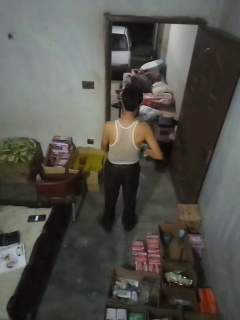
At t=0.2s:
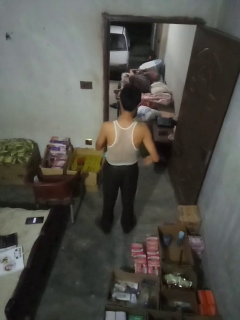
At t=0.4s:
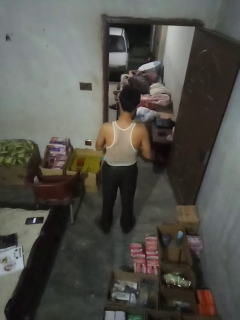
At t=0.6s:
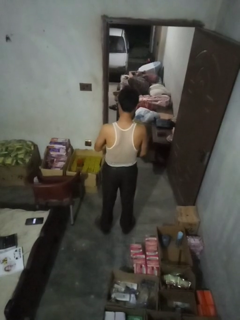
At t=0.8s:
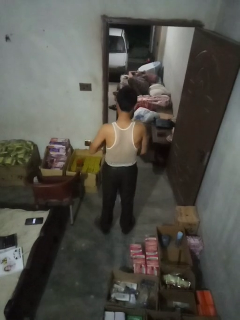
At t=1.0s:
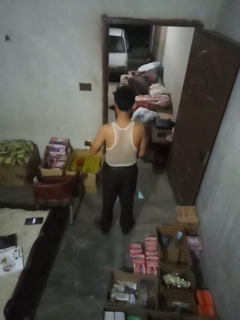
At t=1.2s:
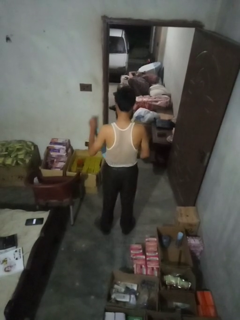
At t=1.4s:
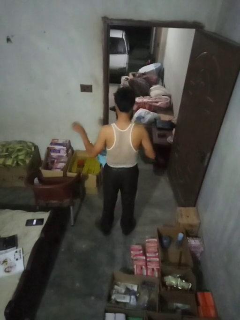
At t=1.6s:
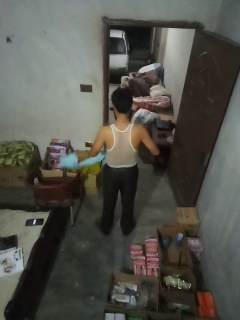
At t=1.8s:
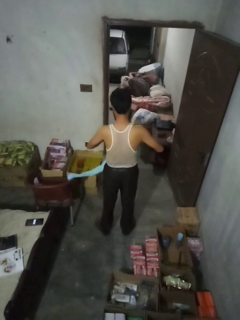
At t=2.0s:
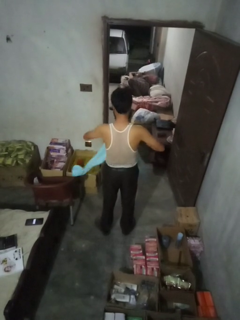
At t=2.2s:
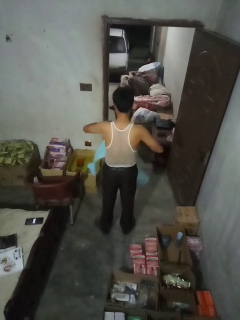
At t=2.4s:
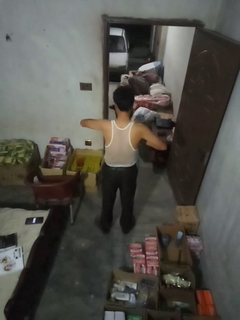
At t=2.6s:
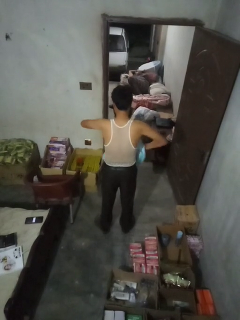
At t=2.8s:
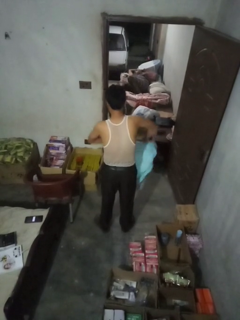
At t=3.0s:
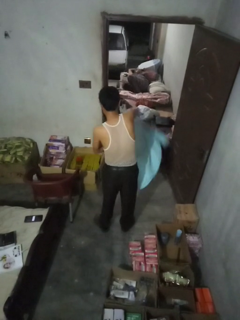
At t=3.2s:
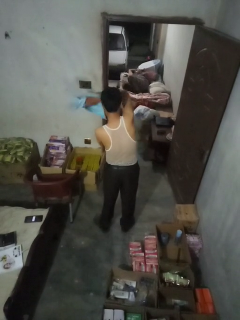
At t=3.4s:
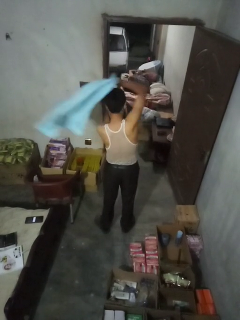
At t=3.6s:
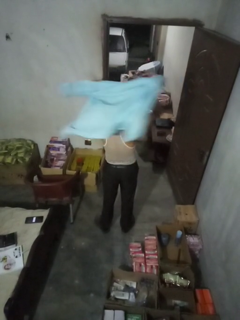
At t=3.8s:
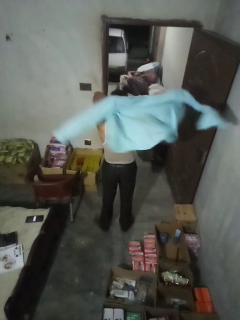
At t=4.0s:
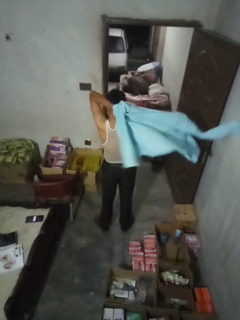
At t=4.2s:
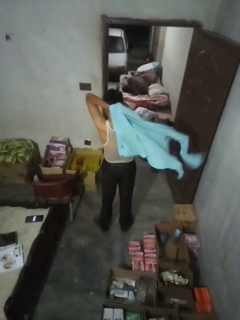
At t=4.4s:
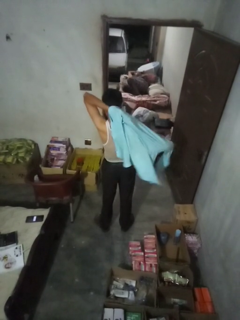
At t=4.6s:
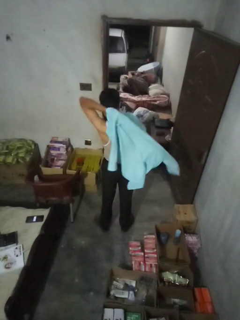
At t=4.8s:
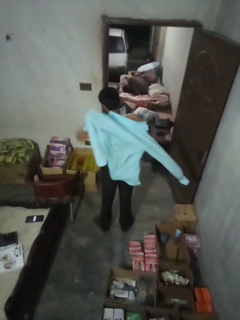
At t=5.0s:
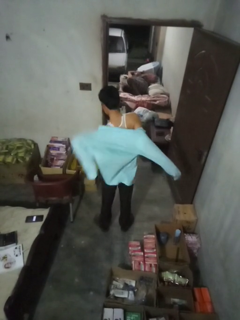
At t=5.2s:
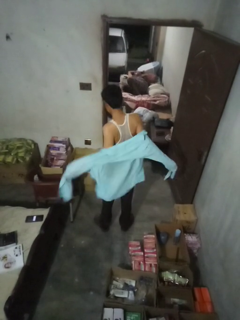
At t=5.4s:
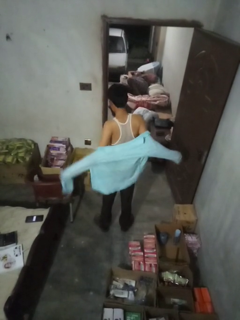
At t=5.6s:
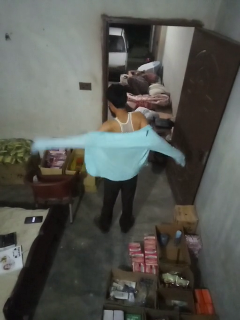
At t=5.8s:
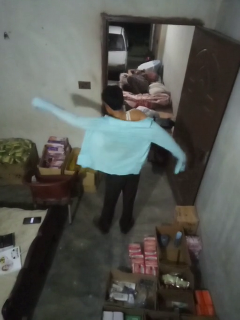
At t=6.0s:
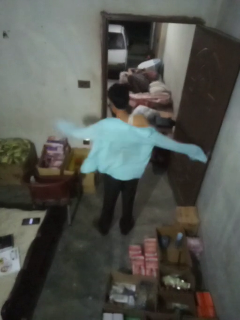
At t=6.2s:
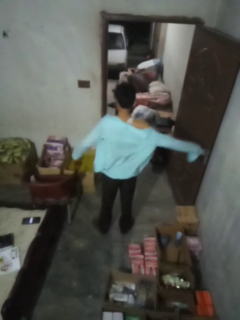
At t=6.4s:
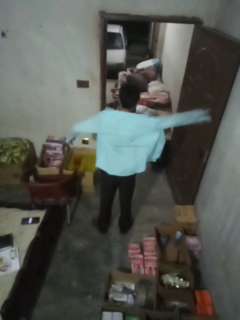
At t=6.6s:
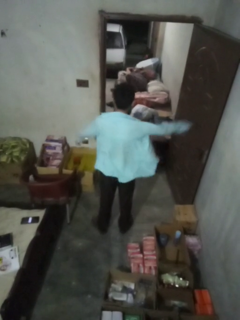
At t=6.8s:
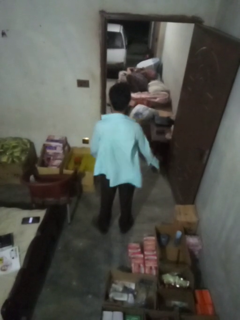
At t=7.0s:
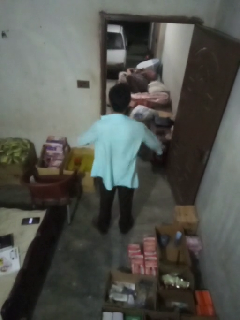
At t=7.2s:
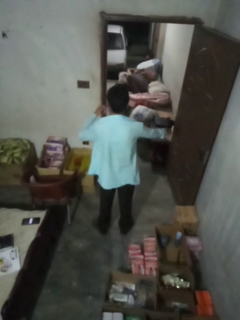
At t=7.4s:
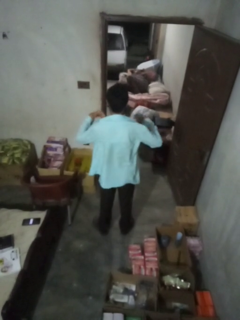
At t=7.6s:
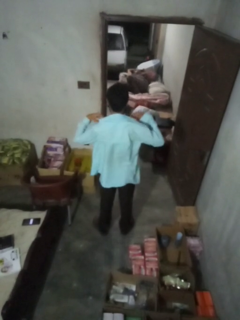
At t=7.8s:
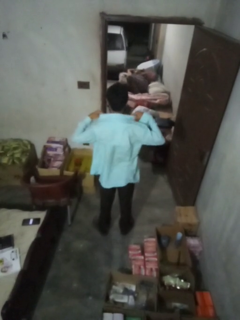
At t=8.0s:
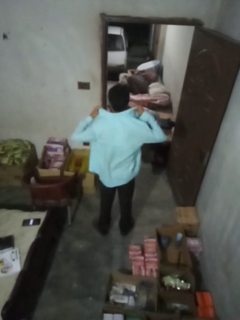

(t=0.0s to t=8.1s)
person puts on shirt

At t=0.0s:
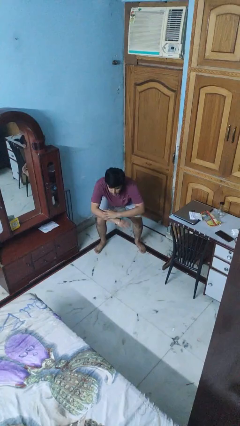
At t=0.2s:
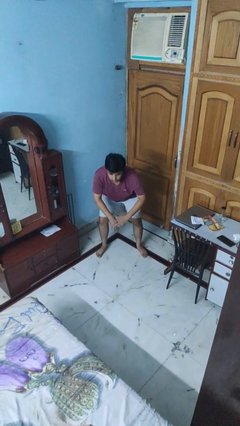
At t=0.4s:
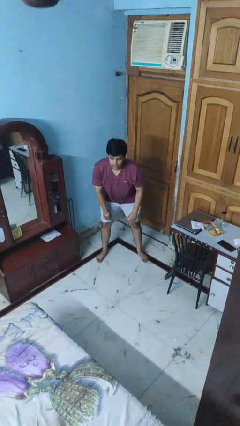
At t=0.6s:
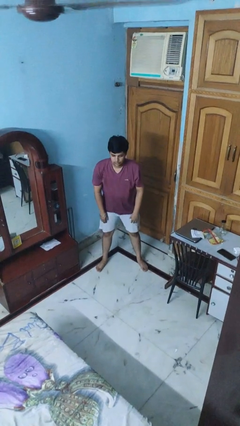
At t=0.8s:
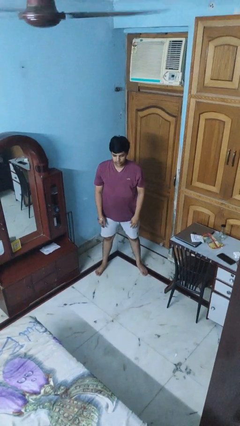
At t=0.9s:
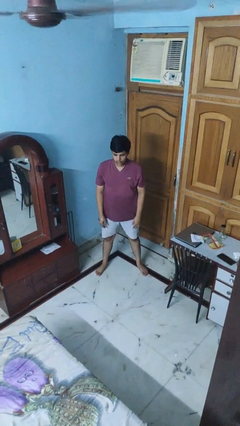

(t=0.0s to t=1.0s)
person stands up

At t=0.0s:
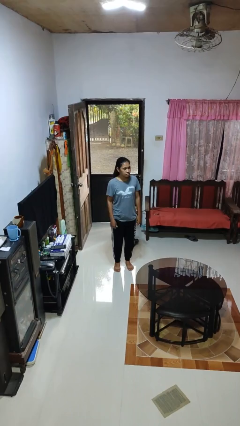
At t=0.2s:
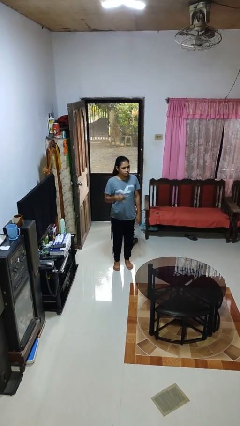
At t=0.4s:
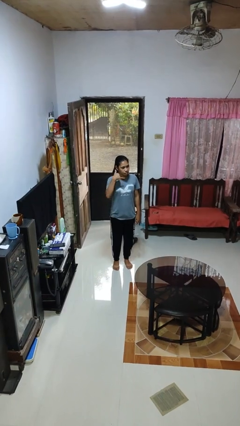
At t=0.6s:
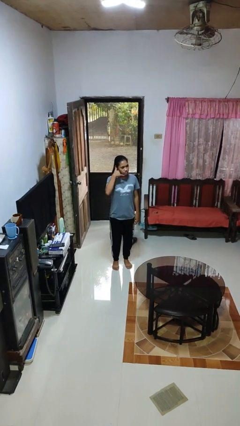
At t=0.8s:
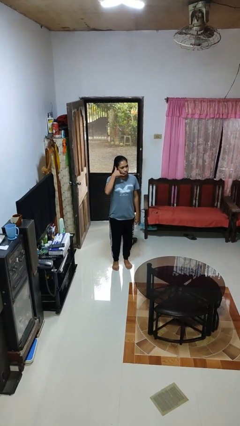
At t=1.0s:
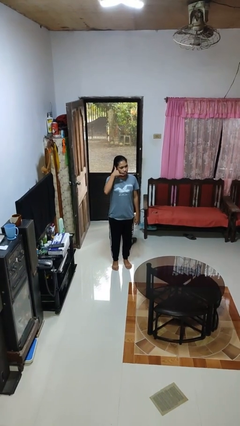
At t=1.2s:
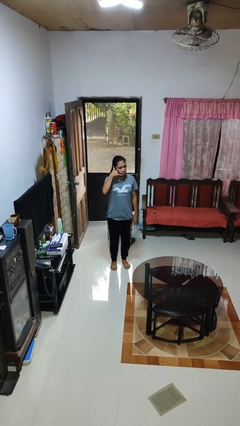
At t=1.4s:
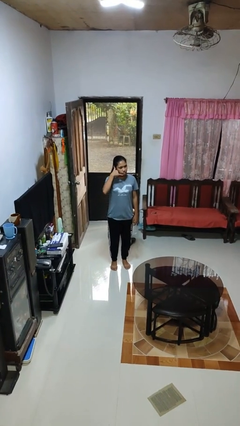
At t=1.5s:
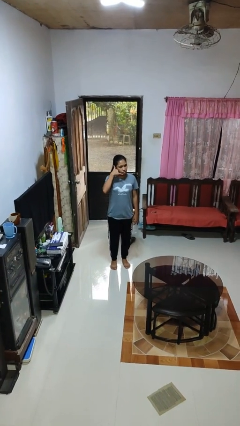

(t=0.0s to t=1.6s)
person gestures call me

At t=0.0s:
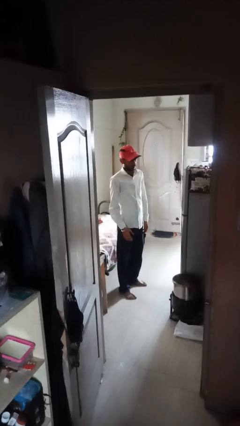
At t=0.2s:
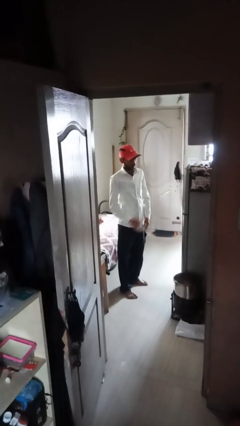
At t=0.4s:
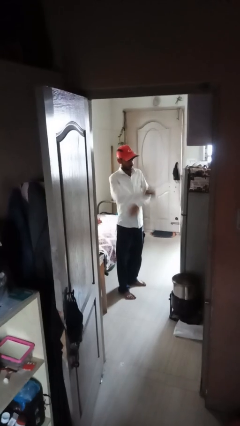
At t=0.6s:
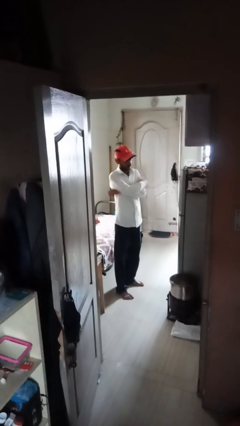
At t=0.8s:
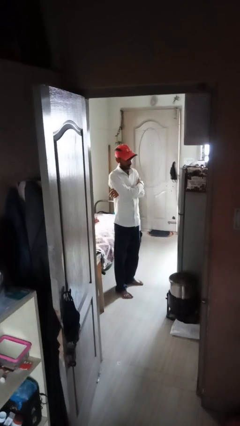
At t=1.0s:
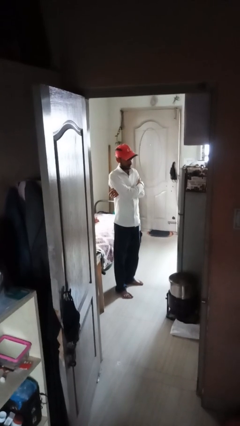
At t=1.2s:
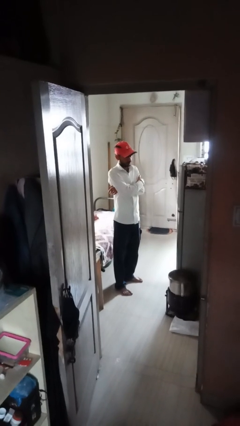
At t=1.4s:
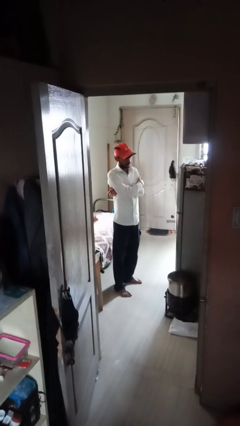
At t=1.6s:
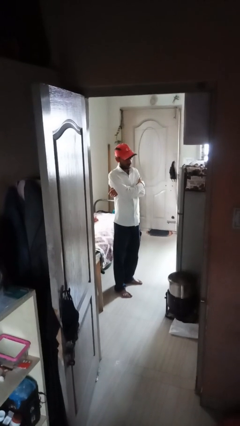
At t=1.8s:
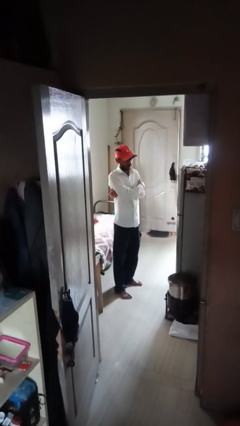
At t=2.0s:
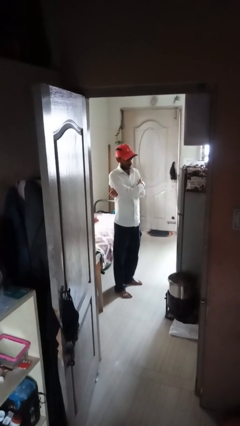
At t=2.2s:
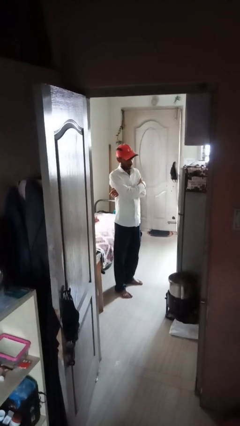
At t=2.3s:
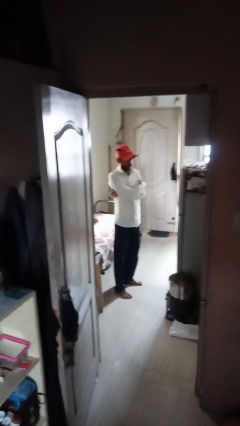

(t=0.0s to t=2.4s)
person crosses arms

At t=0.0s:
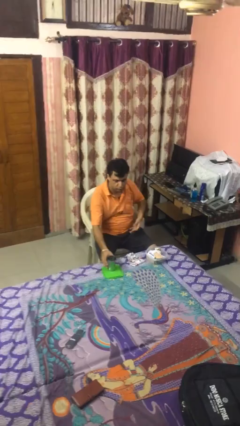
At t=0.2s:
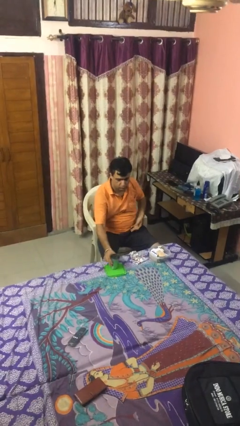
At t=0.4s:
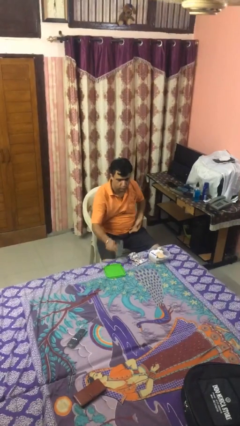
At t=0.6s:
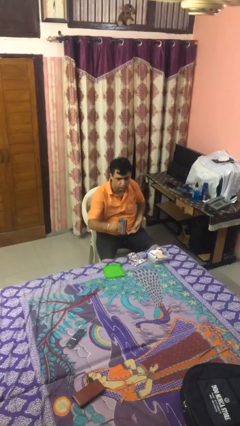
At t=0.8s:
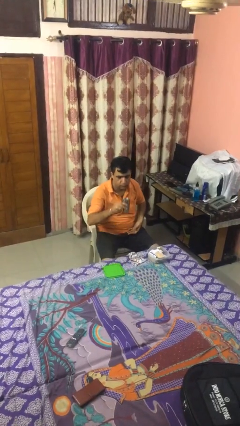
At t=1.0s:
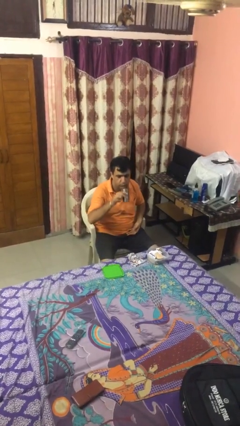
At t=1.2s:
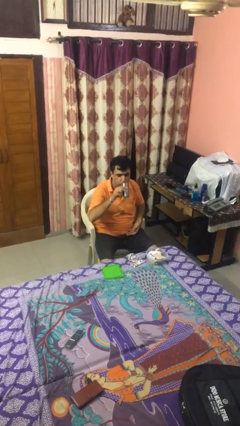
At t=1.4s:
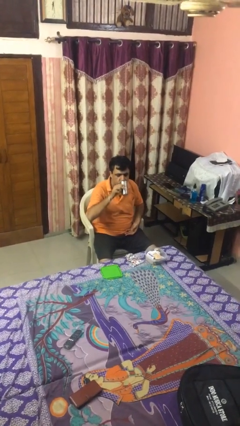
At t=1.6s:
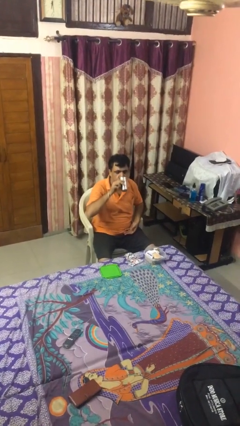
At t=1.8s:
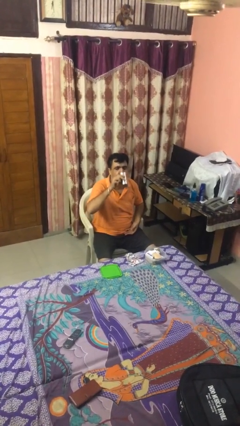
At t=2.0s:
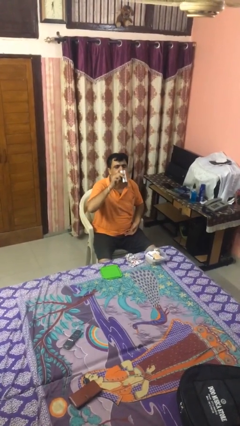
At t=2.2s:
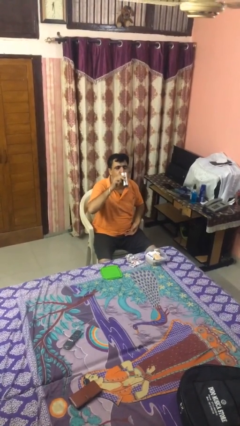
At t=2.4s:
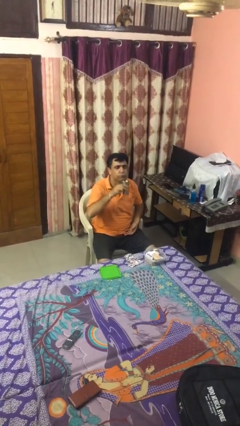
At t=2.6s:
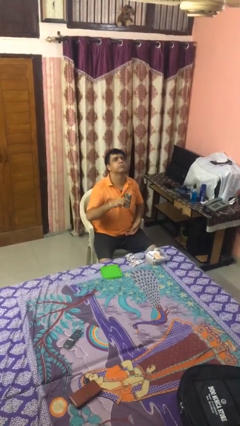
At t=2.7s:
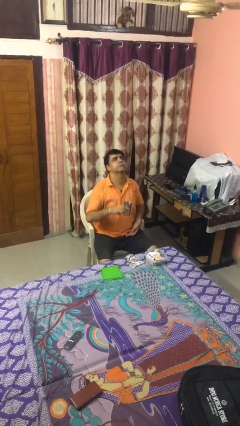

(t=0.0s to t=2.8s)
person drinks from cup

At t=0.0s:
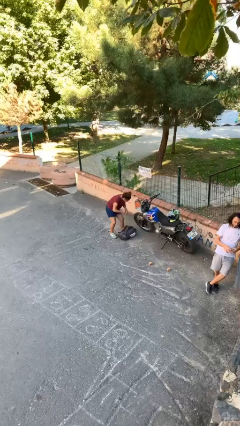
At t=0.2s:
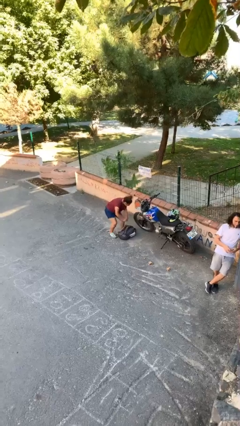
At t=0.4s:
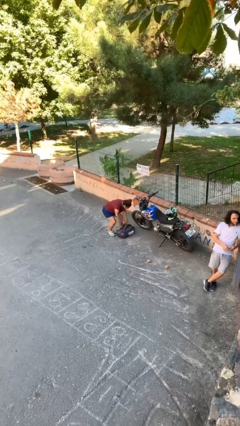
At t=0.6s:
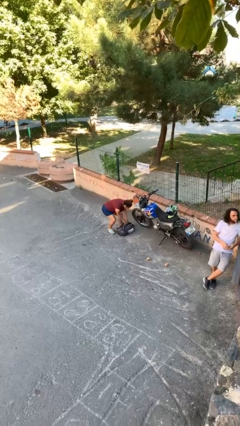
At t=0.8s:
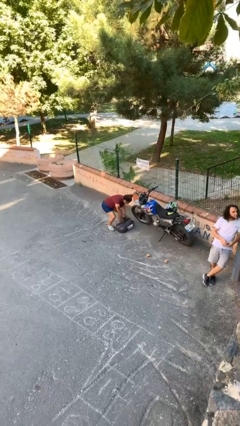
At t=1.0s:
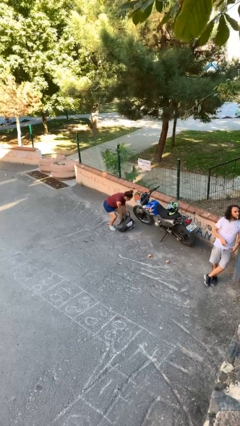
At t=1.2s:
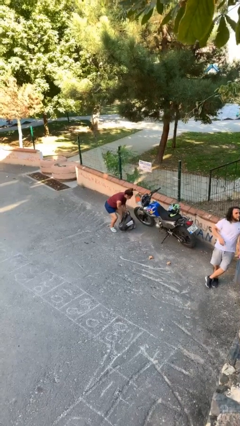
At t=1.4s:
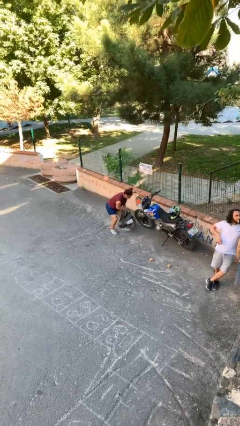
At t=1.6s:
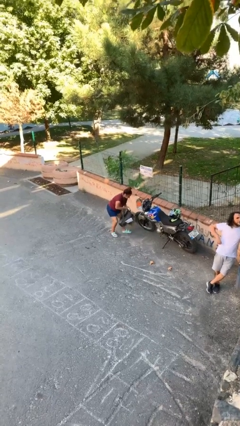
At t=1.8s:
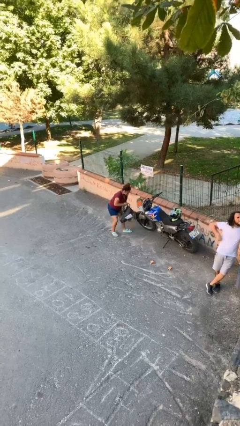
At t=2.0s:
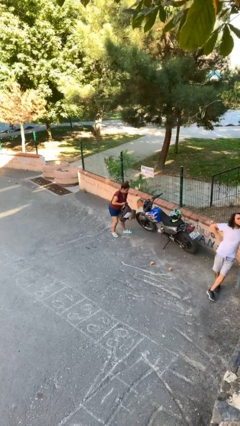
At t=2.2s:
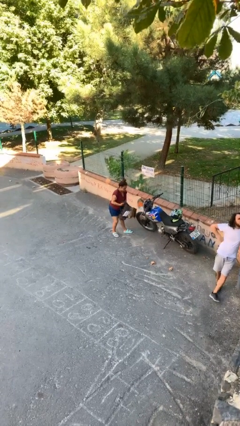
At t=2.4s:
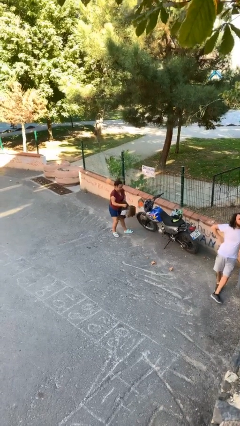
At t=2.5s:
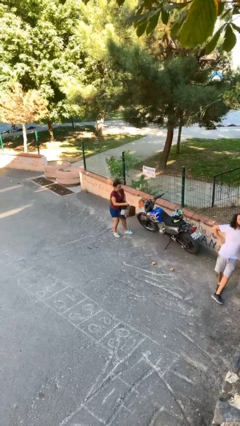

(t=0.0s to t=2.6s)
person picks up object from floor

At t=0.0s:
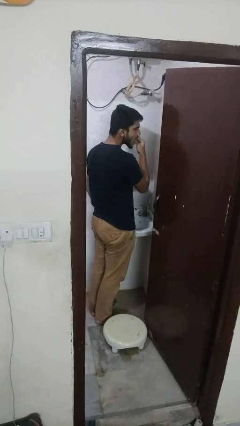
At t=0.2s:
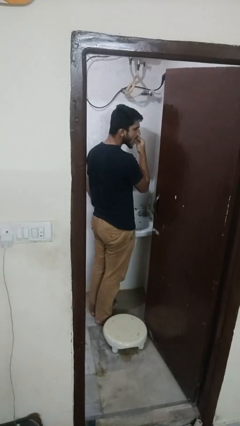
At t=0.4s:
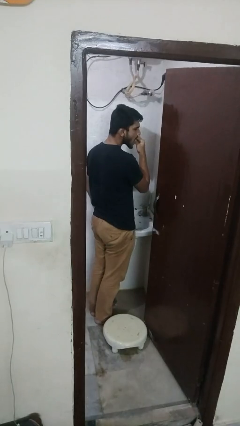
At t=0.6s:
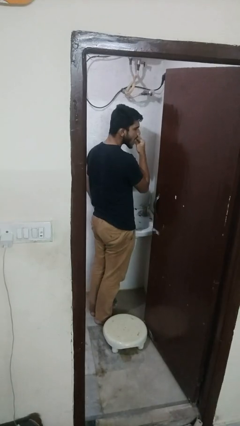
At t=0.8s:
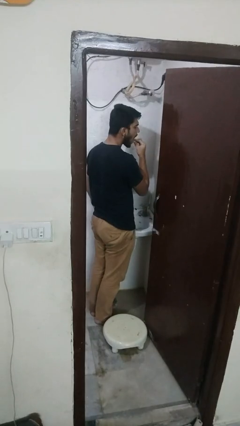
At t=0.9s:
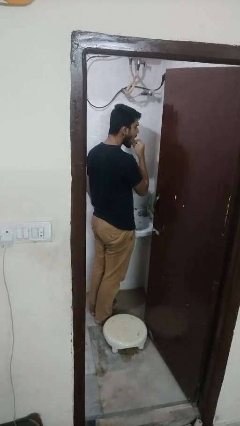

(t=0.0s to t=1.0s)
person flosses
